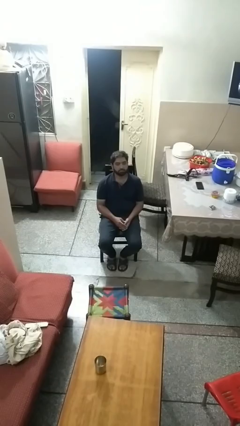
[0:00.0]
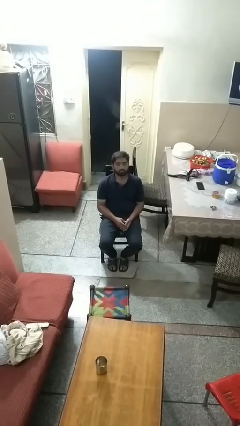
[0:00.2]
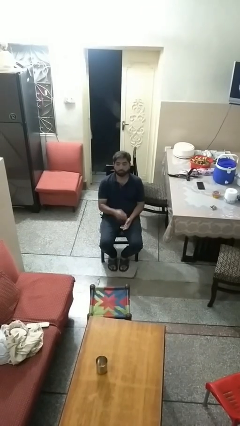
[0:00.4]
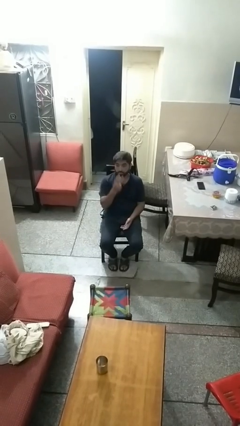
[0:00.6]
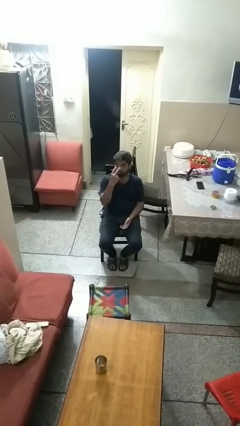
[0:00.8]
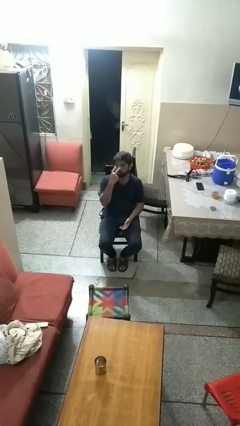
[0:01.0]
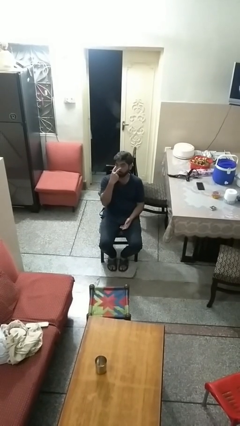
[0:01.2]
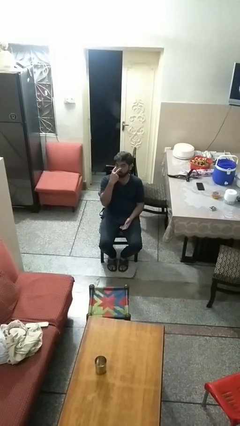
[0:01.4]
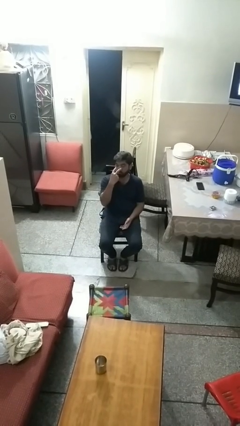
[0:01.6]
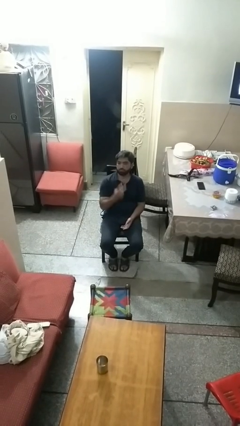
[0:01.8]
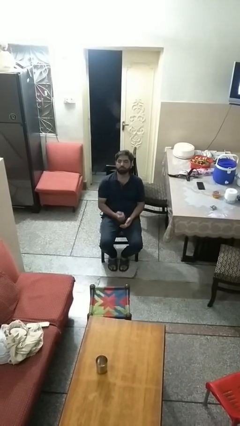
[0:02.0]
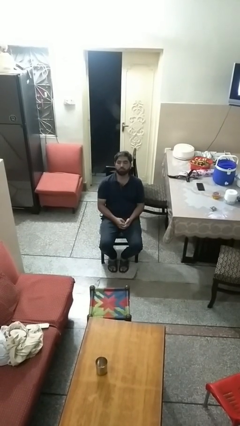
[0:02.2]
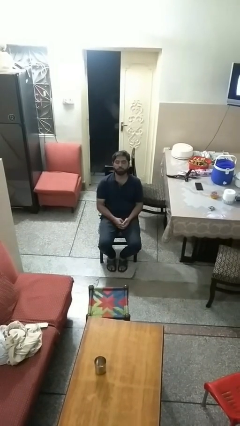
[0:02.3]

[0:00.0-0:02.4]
person gestures watch closely

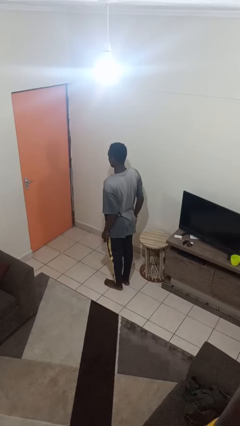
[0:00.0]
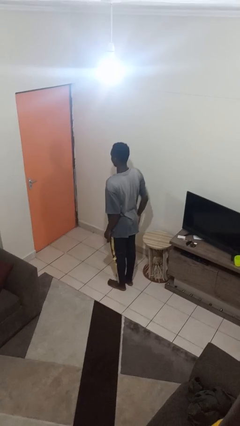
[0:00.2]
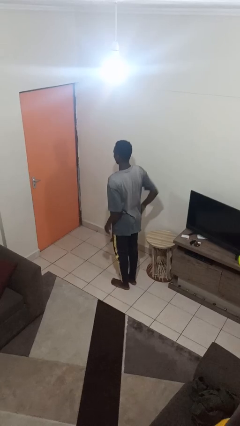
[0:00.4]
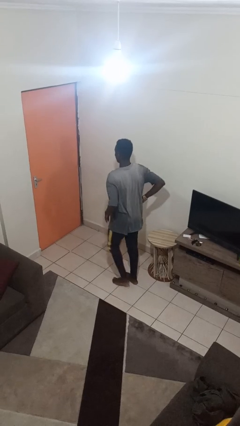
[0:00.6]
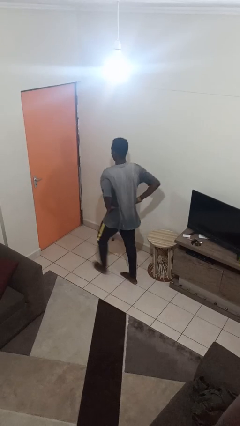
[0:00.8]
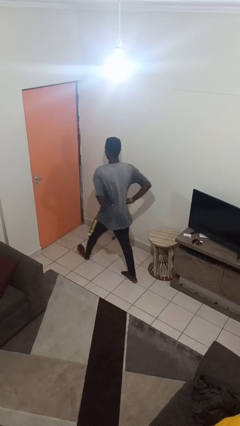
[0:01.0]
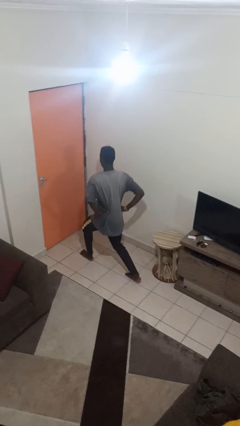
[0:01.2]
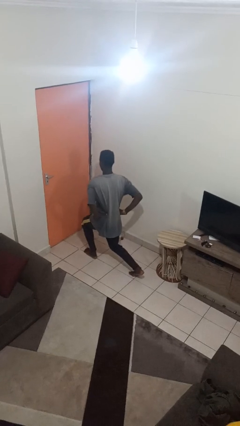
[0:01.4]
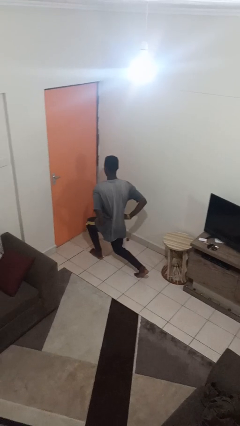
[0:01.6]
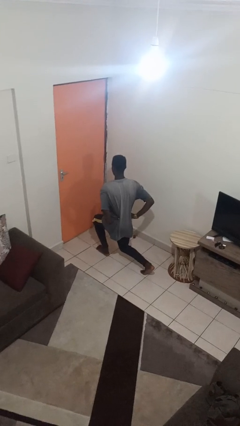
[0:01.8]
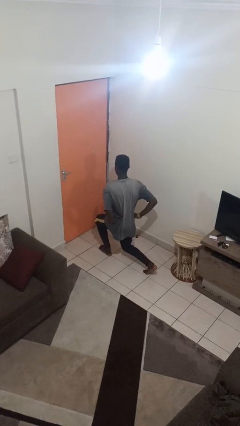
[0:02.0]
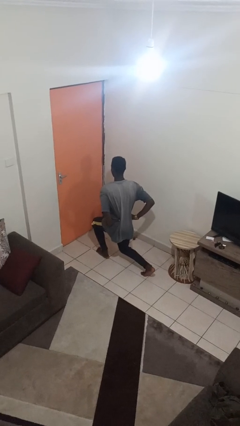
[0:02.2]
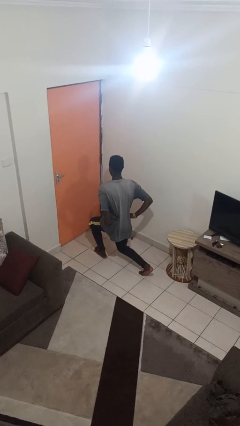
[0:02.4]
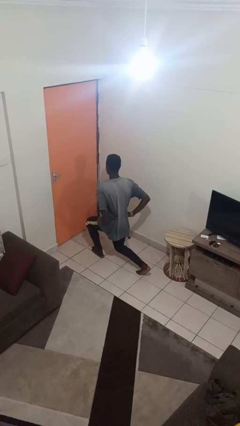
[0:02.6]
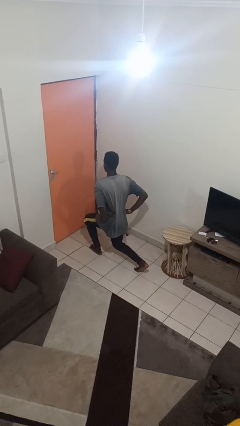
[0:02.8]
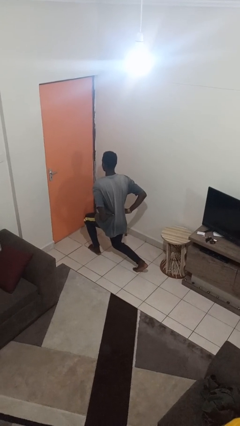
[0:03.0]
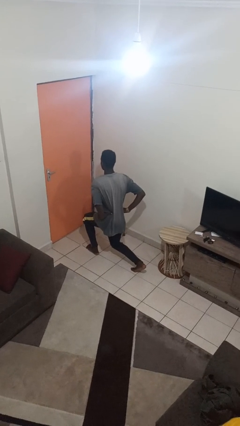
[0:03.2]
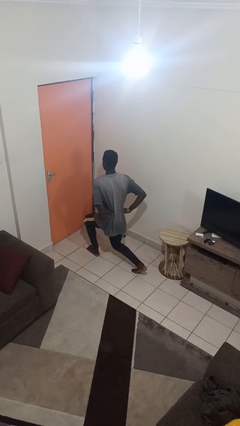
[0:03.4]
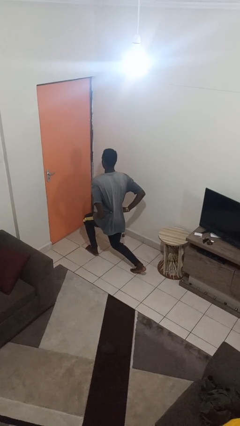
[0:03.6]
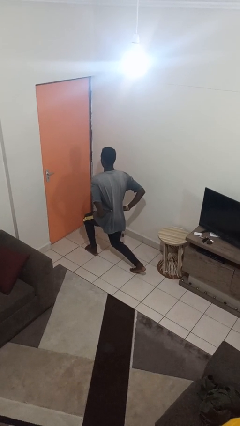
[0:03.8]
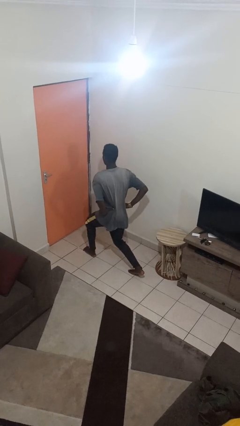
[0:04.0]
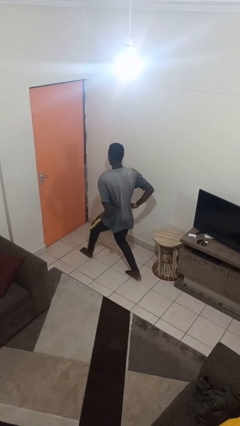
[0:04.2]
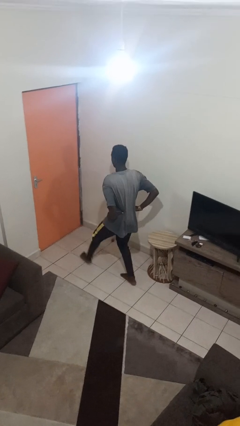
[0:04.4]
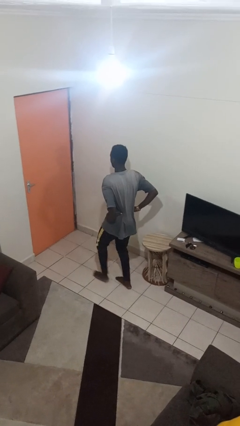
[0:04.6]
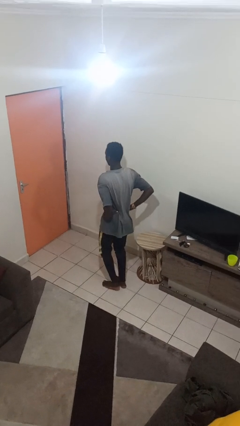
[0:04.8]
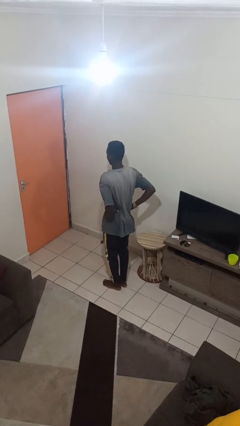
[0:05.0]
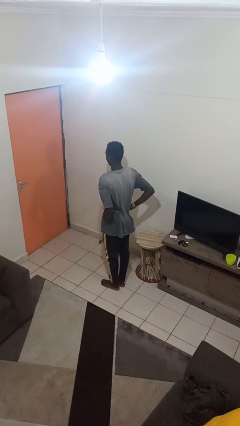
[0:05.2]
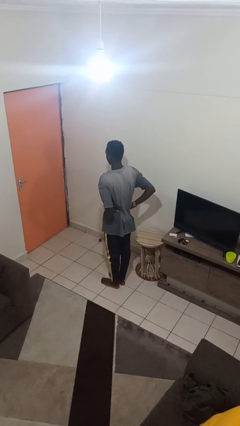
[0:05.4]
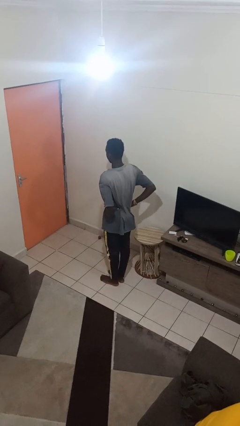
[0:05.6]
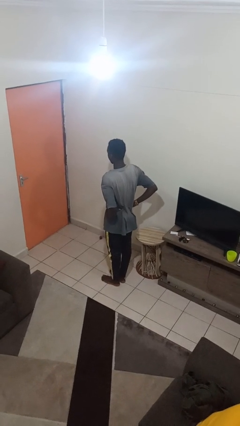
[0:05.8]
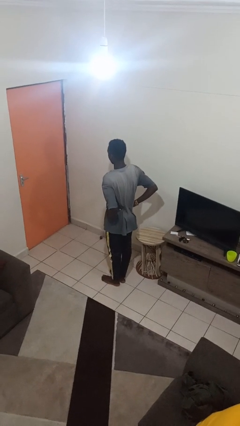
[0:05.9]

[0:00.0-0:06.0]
person exercises with lunges

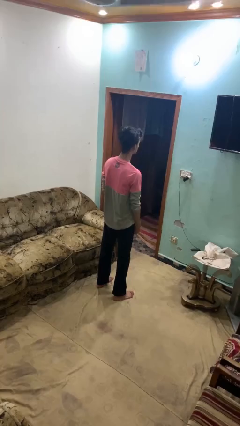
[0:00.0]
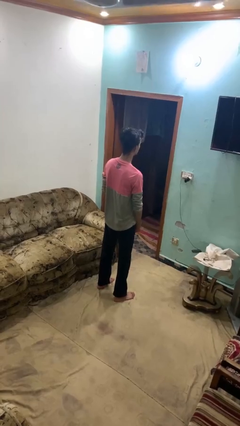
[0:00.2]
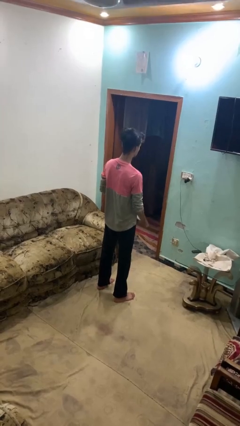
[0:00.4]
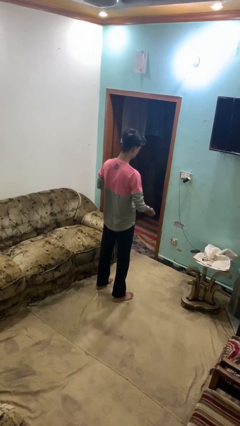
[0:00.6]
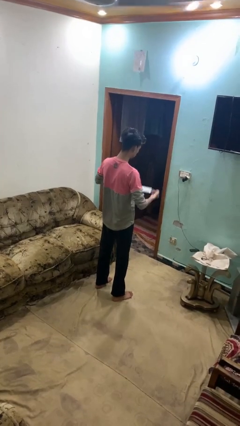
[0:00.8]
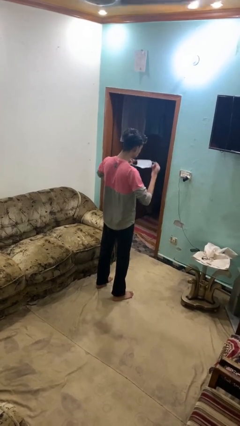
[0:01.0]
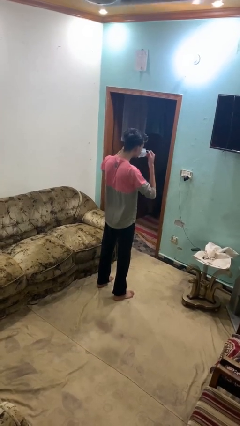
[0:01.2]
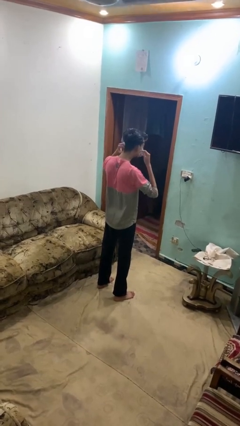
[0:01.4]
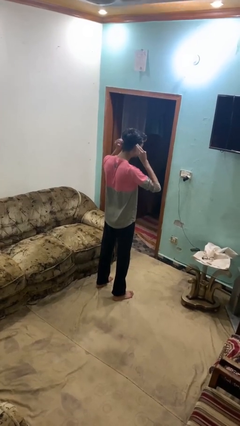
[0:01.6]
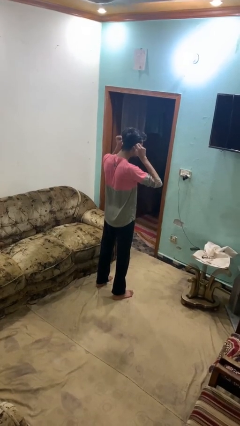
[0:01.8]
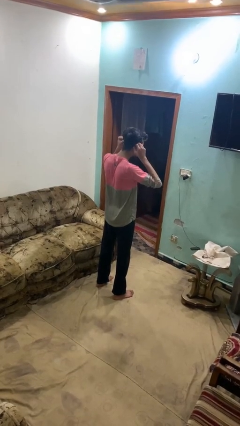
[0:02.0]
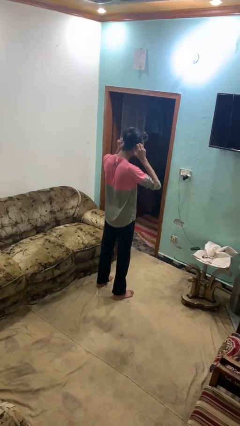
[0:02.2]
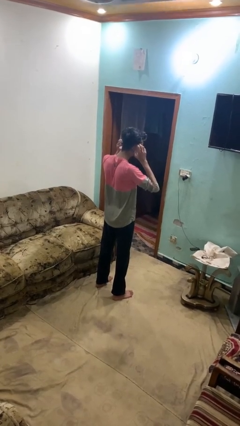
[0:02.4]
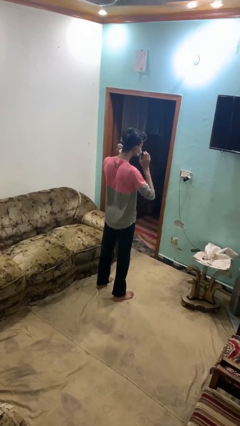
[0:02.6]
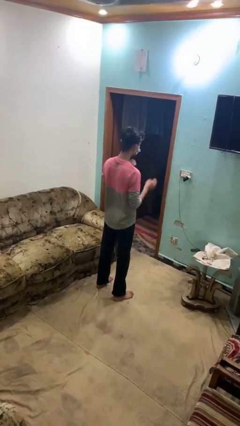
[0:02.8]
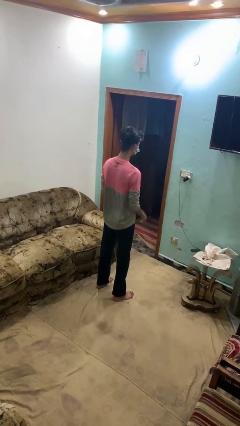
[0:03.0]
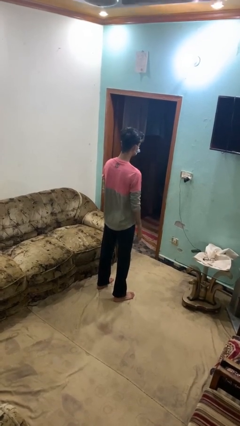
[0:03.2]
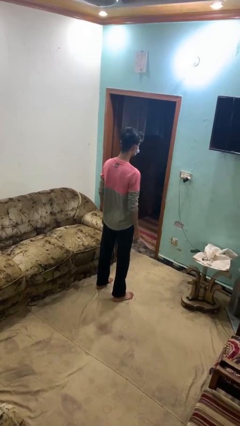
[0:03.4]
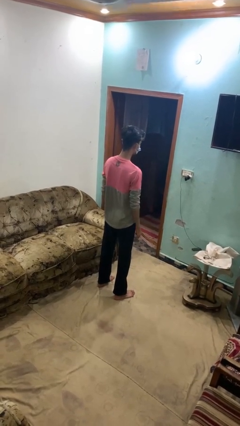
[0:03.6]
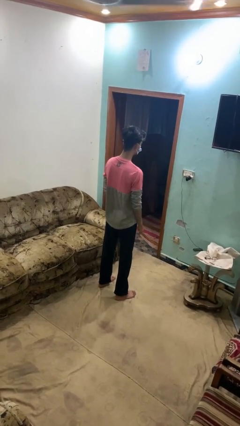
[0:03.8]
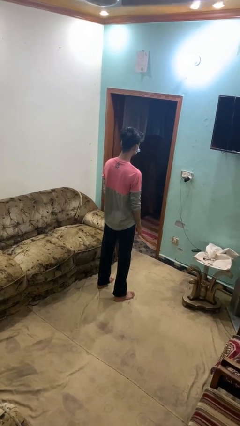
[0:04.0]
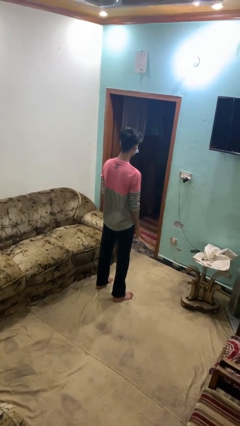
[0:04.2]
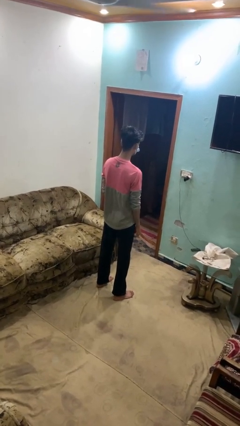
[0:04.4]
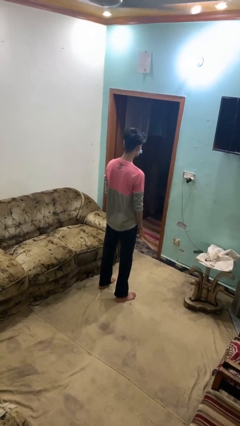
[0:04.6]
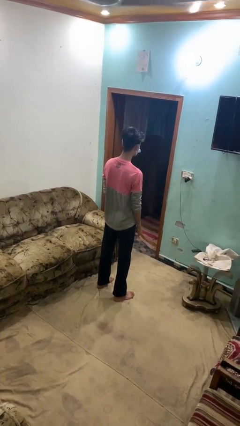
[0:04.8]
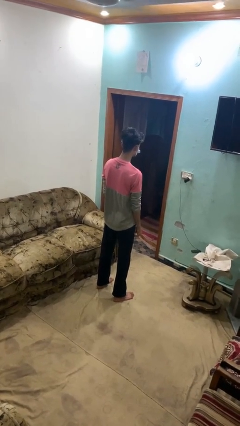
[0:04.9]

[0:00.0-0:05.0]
person puts on facemask

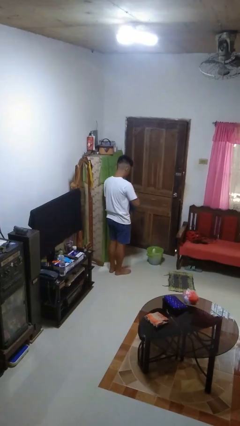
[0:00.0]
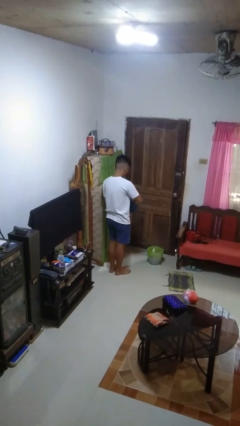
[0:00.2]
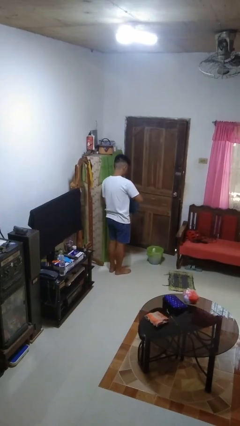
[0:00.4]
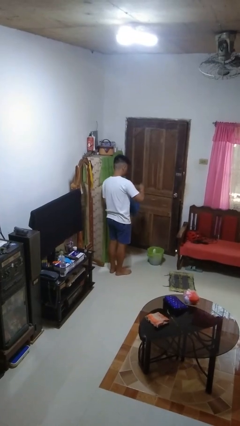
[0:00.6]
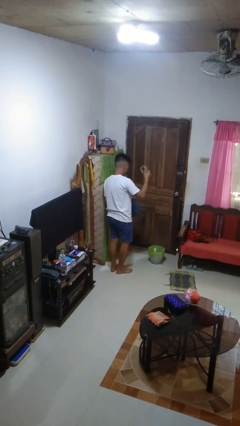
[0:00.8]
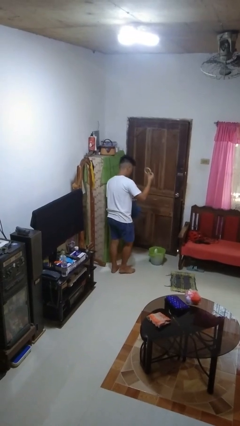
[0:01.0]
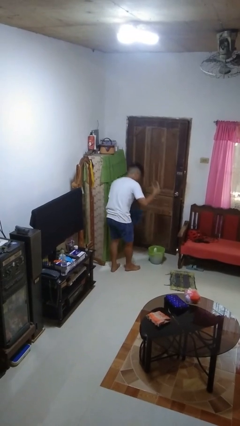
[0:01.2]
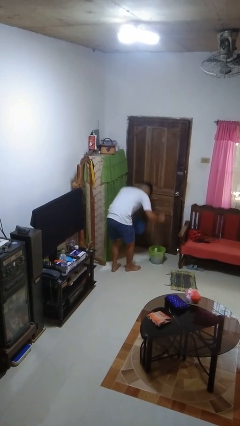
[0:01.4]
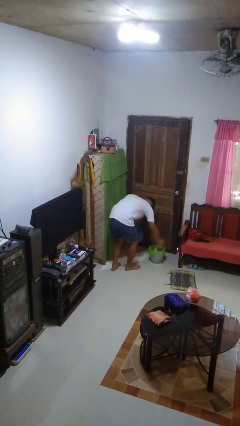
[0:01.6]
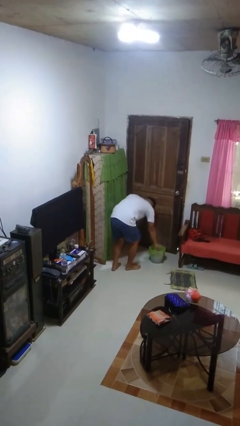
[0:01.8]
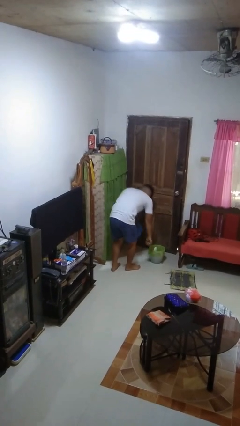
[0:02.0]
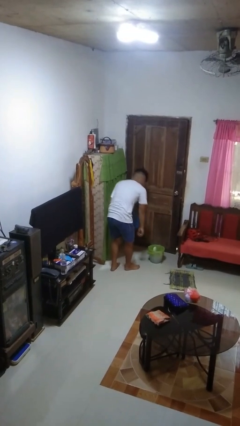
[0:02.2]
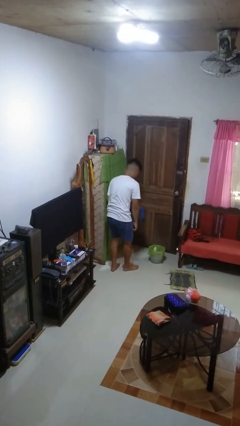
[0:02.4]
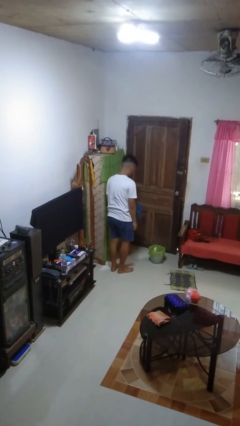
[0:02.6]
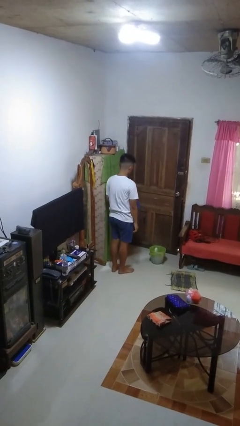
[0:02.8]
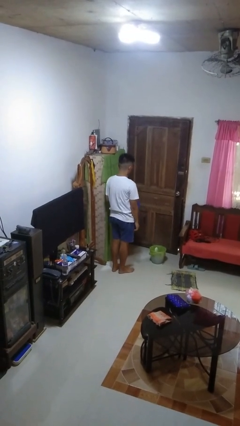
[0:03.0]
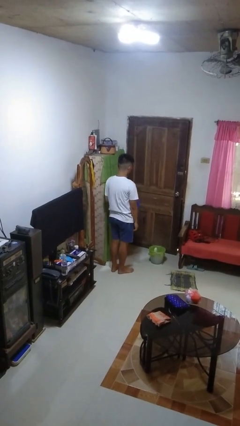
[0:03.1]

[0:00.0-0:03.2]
person discards trash

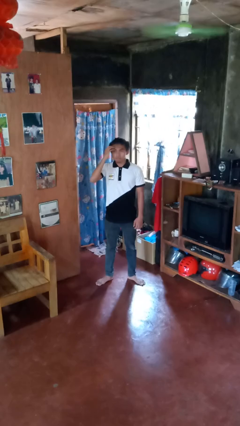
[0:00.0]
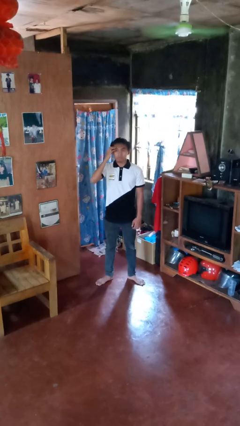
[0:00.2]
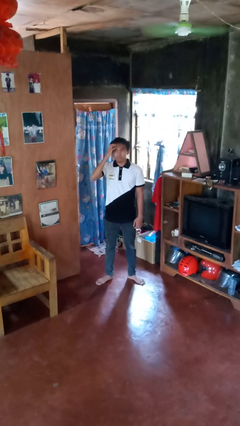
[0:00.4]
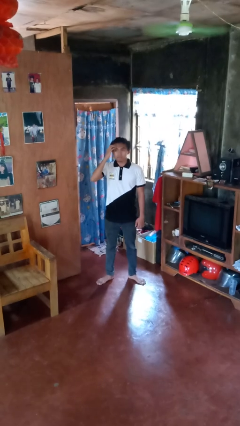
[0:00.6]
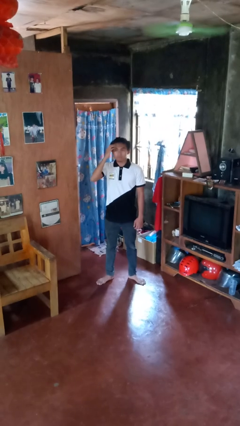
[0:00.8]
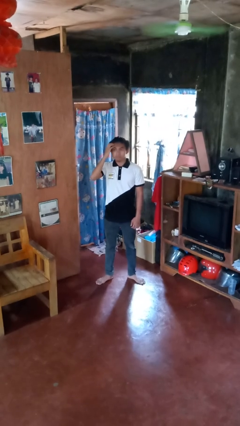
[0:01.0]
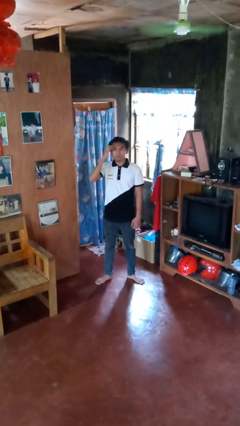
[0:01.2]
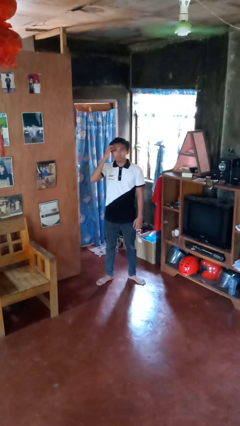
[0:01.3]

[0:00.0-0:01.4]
person scratches face
